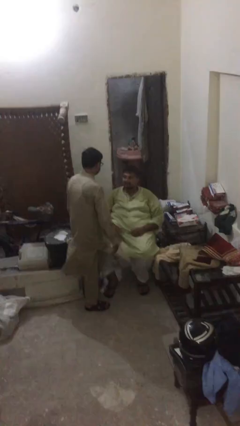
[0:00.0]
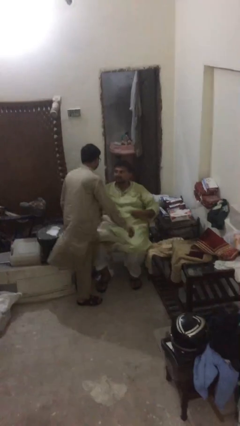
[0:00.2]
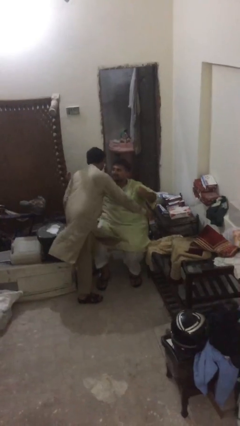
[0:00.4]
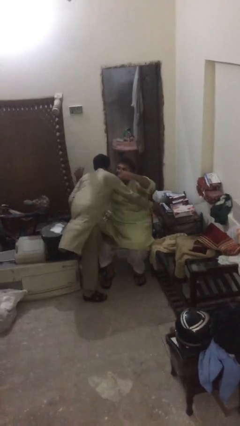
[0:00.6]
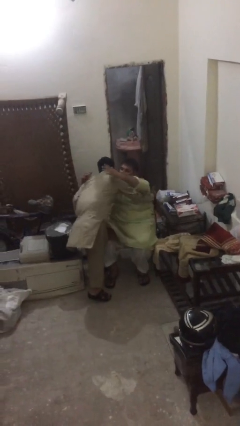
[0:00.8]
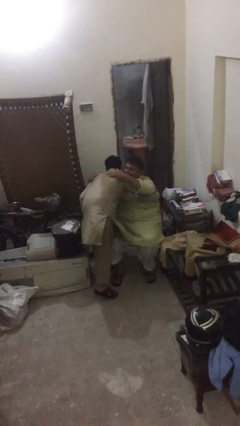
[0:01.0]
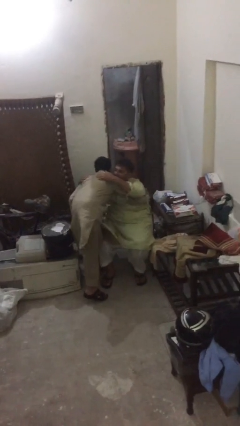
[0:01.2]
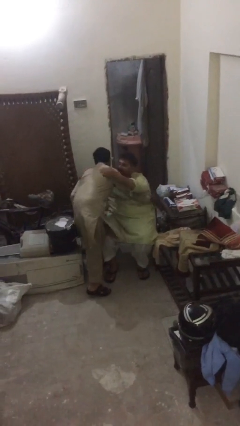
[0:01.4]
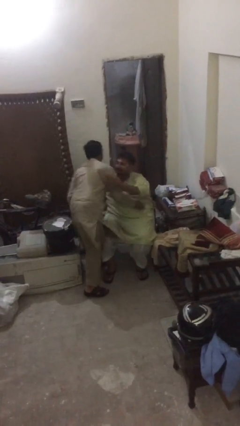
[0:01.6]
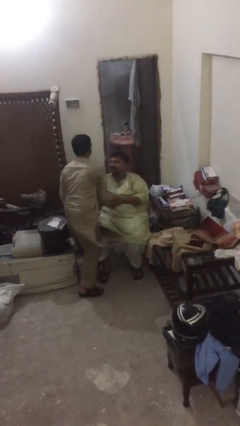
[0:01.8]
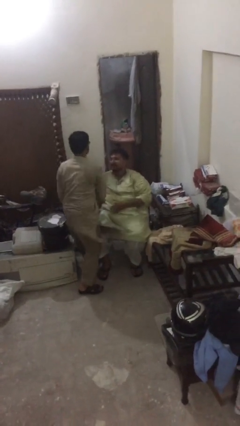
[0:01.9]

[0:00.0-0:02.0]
person embraces person

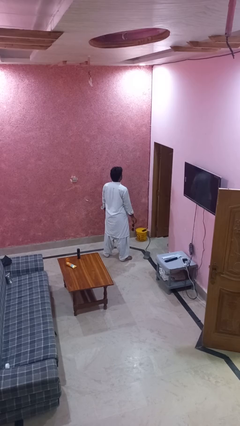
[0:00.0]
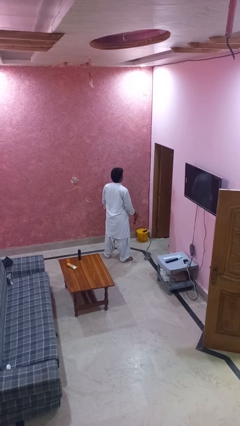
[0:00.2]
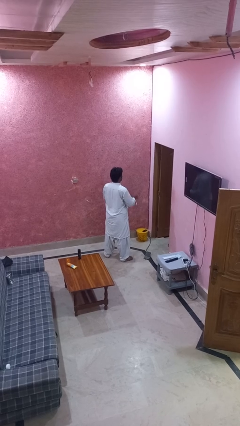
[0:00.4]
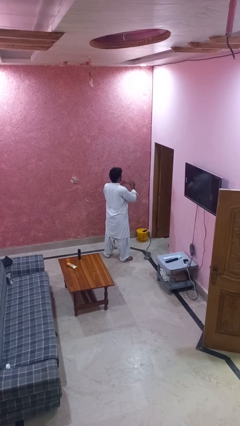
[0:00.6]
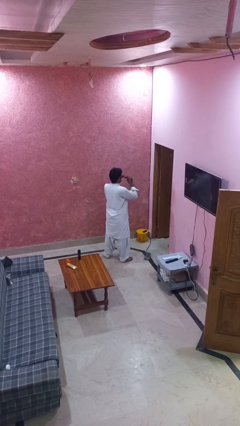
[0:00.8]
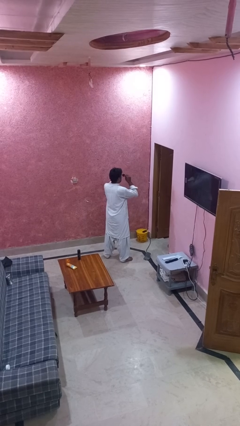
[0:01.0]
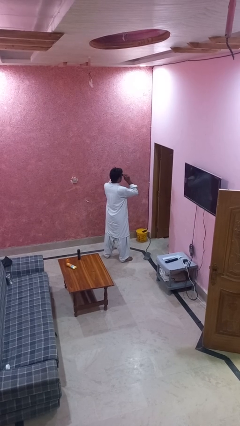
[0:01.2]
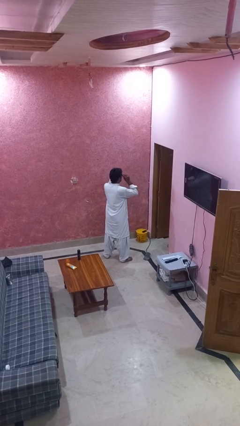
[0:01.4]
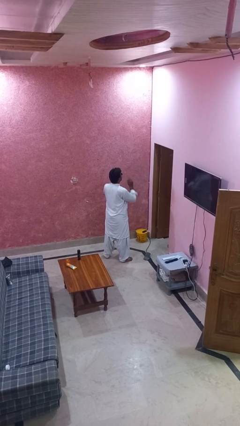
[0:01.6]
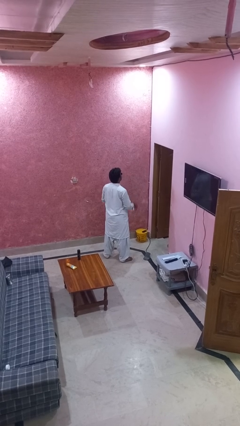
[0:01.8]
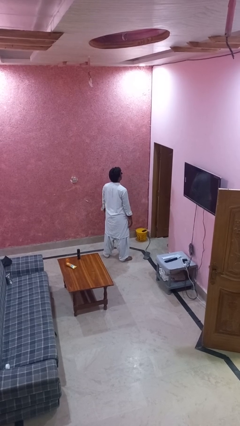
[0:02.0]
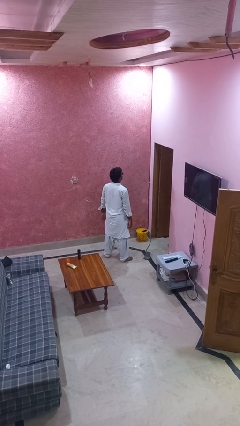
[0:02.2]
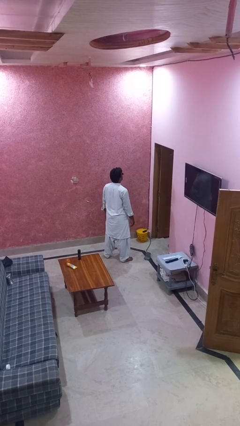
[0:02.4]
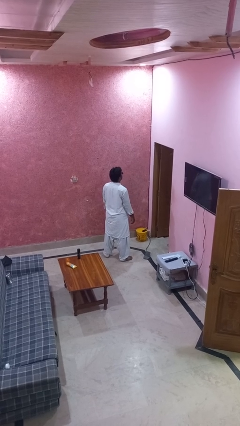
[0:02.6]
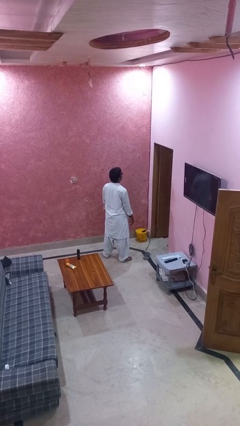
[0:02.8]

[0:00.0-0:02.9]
person puts on sunglasses

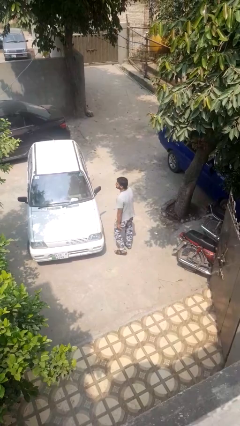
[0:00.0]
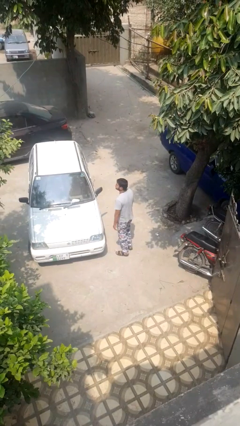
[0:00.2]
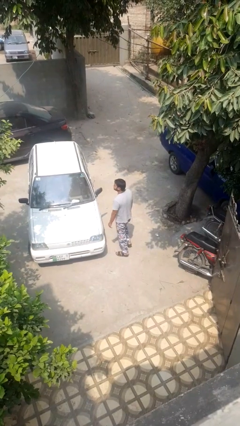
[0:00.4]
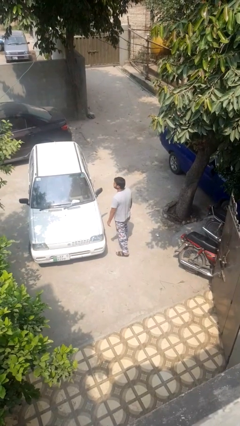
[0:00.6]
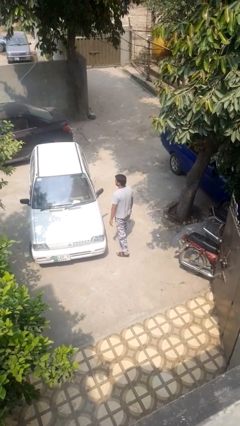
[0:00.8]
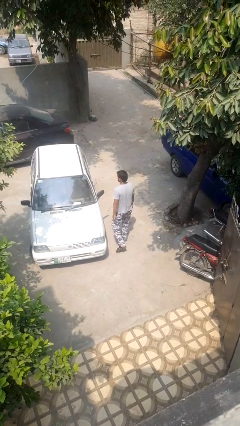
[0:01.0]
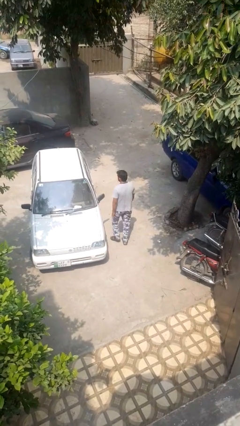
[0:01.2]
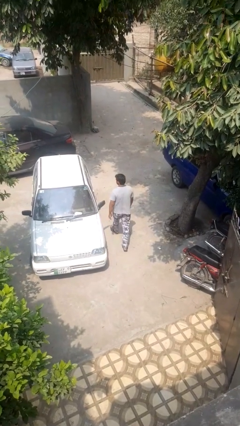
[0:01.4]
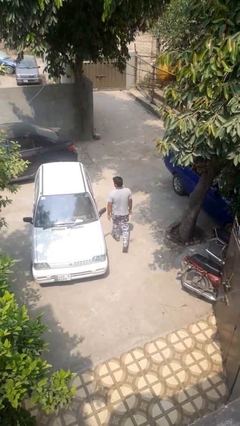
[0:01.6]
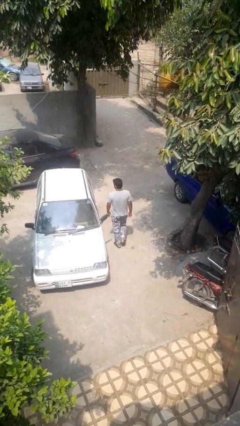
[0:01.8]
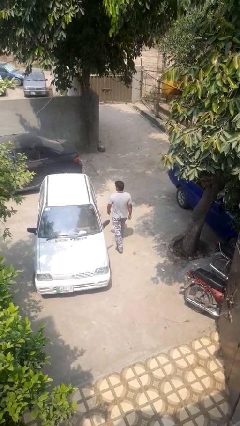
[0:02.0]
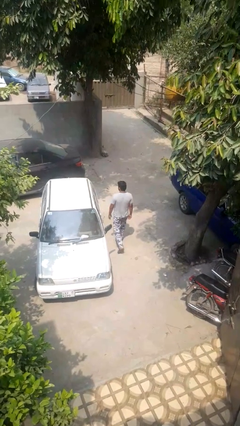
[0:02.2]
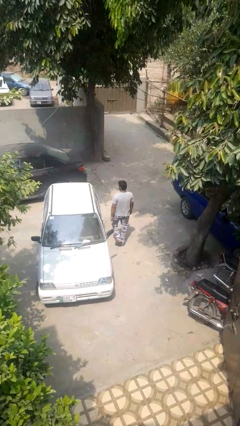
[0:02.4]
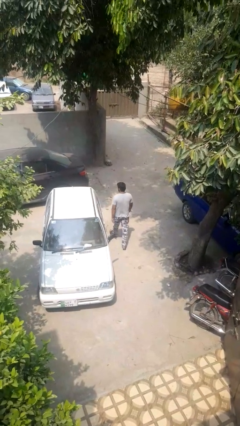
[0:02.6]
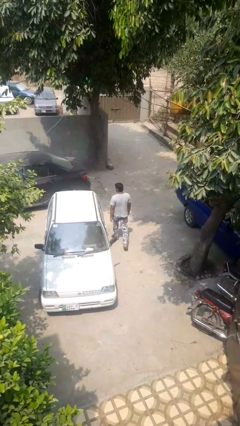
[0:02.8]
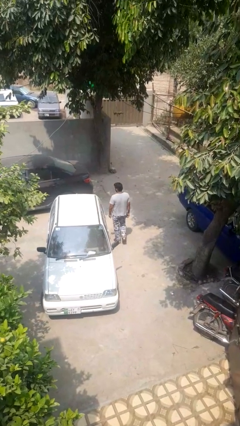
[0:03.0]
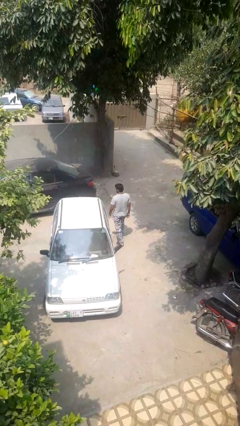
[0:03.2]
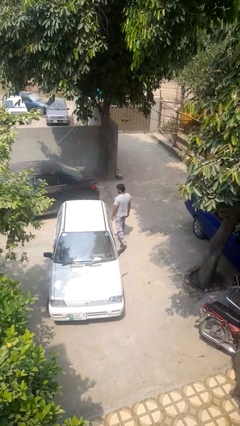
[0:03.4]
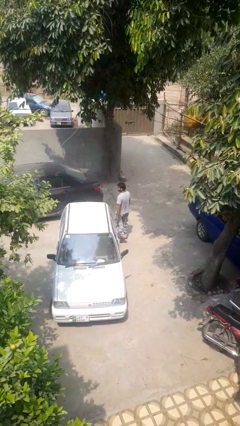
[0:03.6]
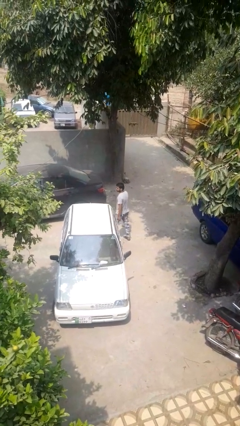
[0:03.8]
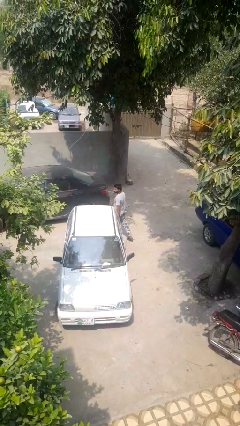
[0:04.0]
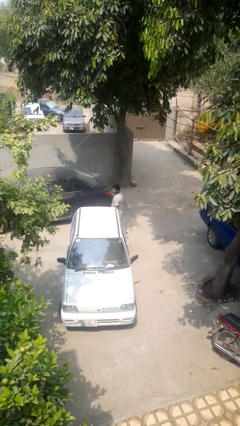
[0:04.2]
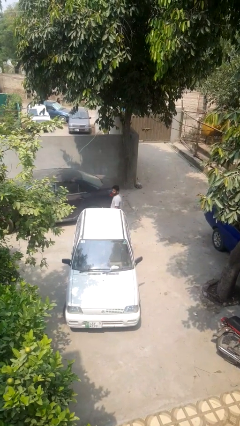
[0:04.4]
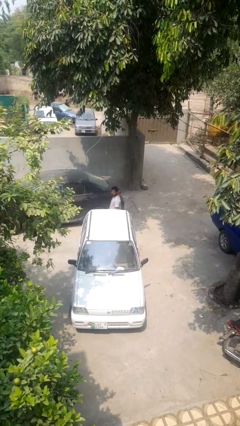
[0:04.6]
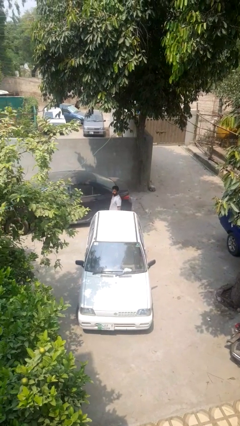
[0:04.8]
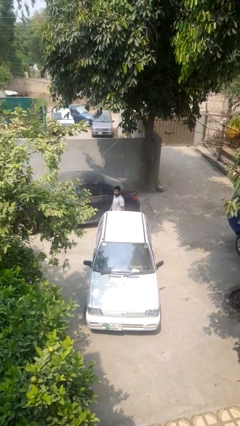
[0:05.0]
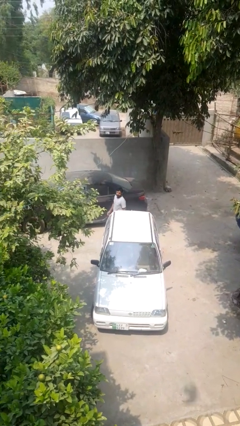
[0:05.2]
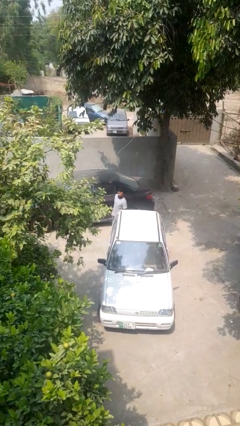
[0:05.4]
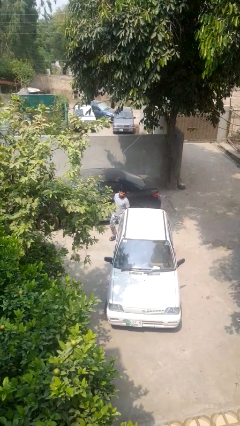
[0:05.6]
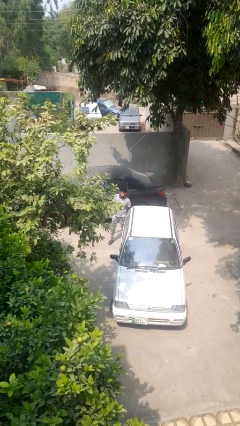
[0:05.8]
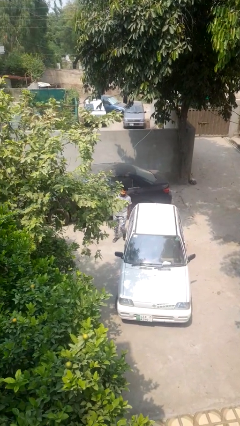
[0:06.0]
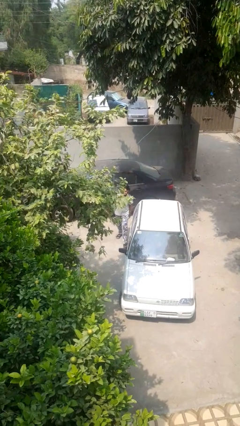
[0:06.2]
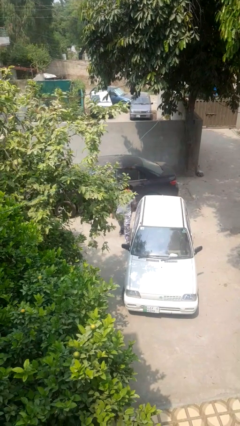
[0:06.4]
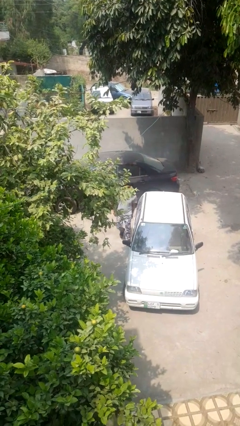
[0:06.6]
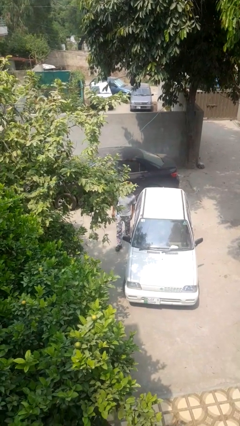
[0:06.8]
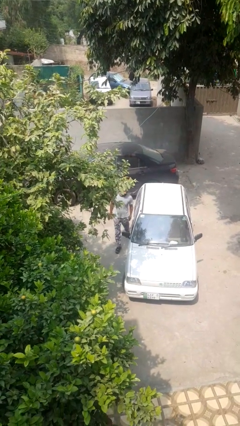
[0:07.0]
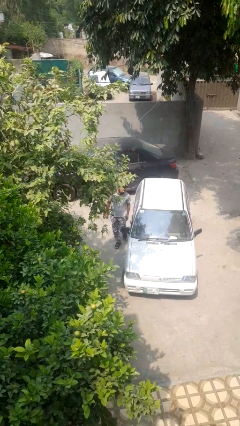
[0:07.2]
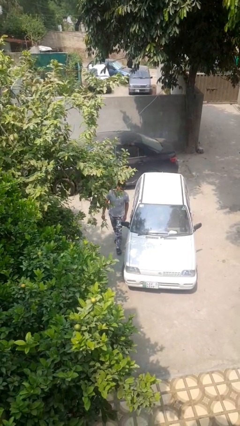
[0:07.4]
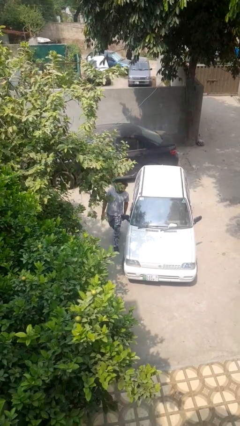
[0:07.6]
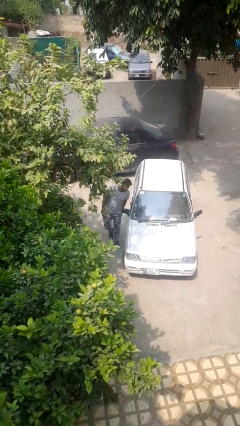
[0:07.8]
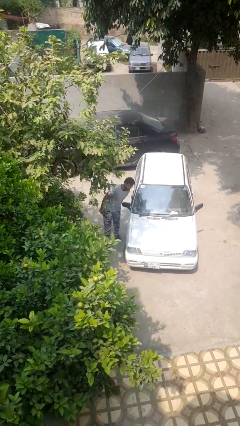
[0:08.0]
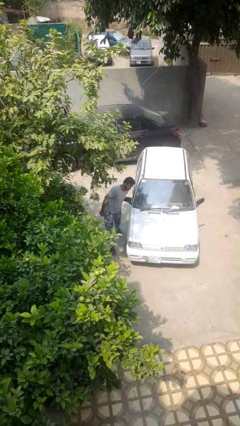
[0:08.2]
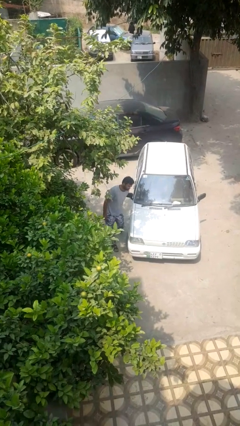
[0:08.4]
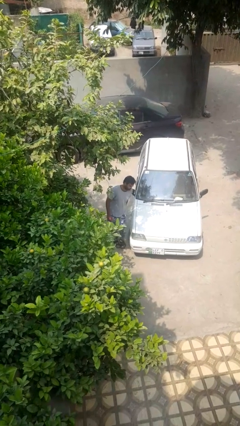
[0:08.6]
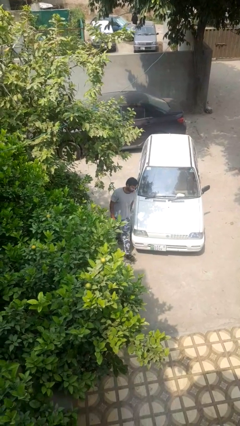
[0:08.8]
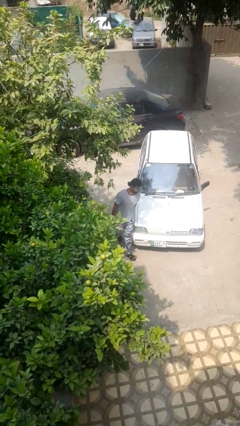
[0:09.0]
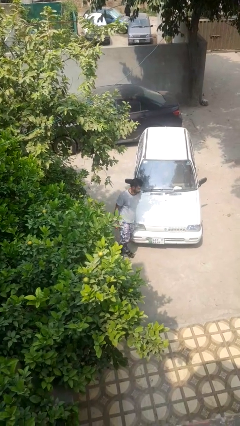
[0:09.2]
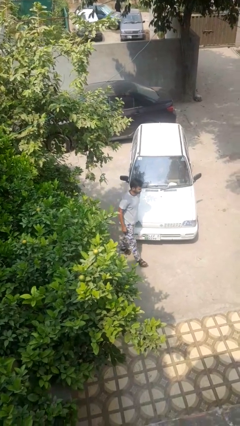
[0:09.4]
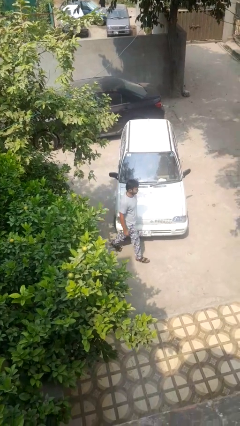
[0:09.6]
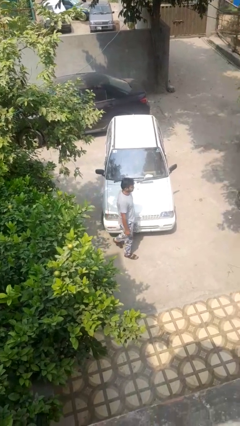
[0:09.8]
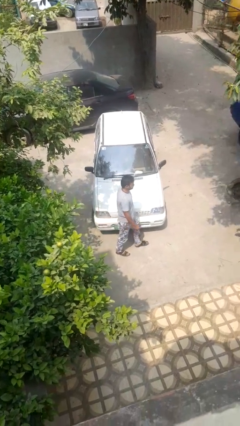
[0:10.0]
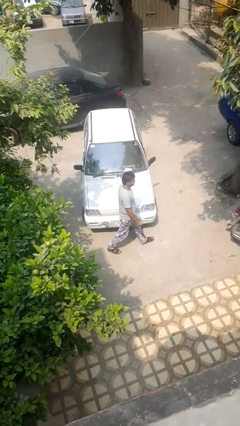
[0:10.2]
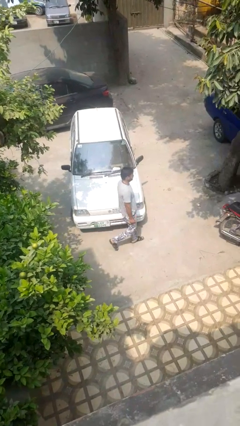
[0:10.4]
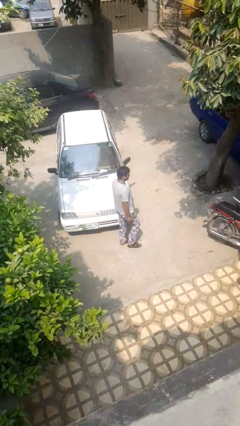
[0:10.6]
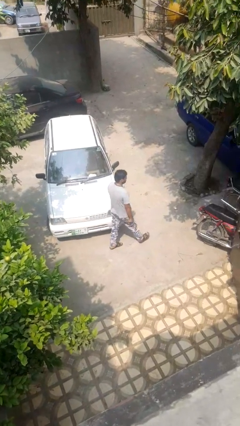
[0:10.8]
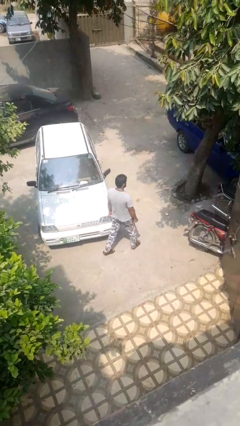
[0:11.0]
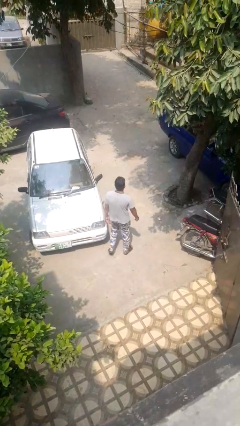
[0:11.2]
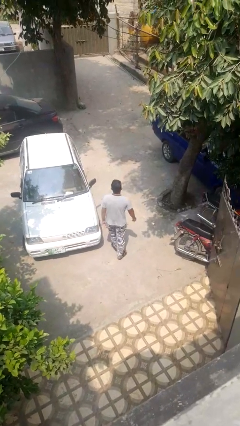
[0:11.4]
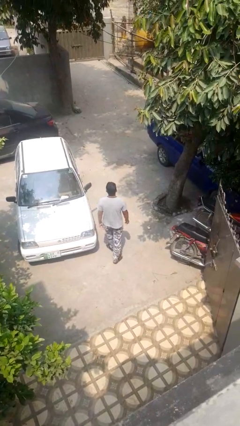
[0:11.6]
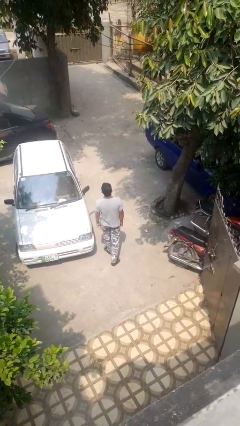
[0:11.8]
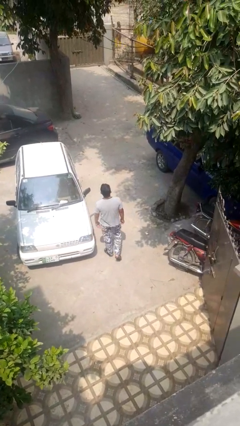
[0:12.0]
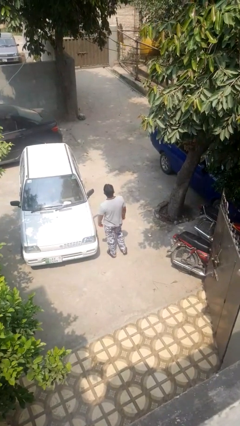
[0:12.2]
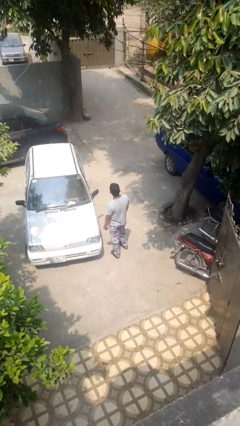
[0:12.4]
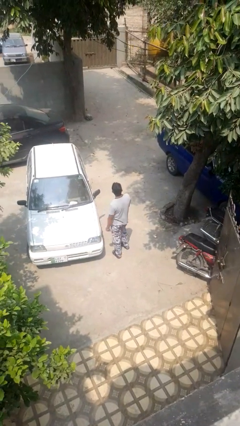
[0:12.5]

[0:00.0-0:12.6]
person walks around car

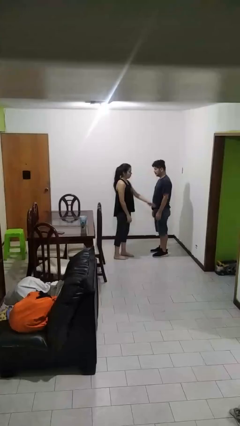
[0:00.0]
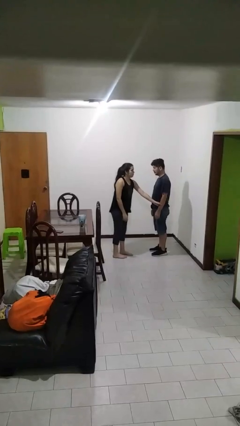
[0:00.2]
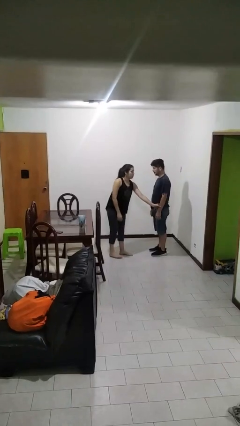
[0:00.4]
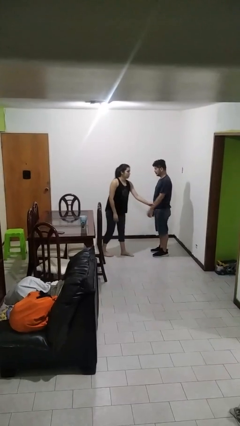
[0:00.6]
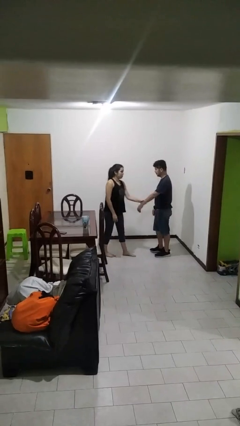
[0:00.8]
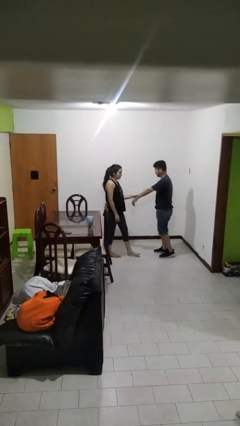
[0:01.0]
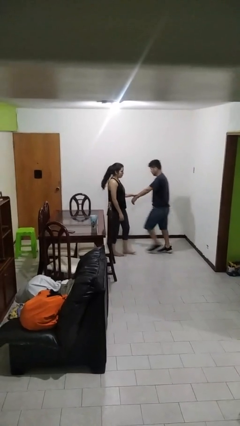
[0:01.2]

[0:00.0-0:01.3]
person grabs person by forearm
